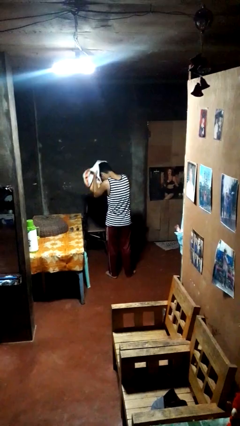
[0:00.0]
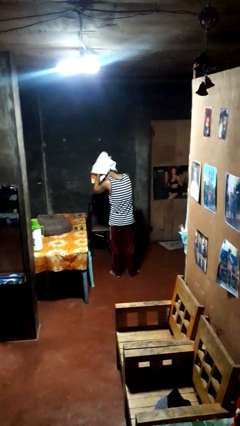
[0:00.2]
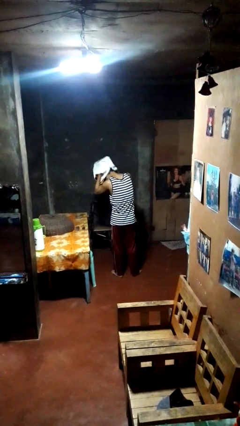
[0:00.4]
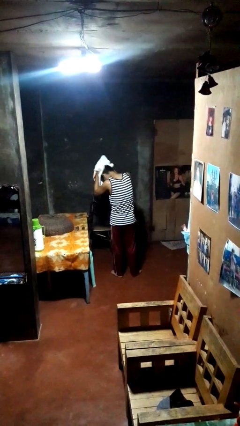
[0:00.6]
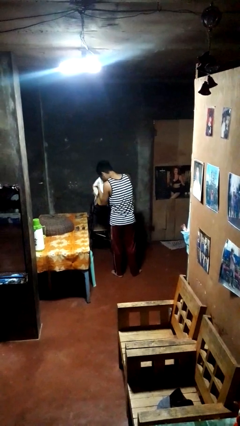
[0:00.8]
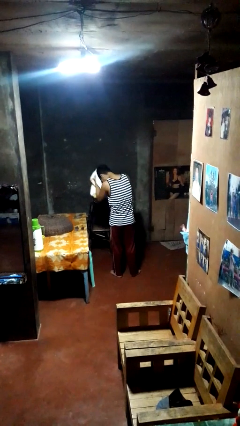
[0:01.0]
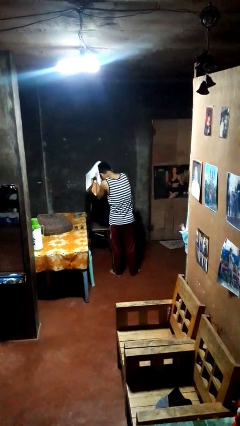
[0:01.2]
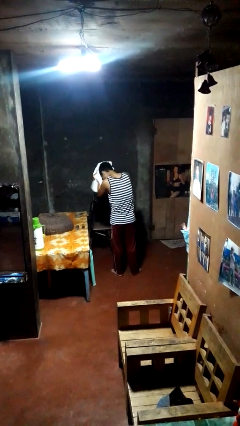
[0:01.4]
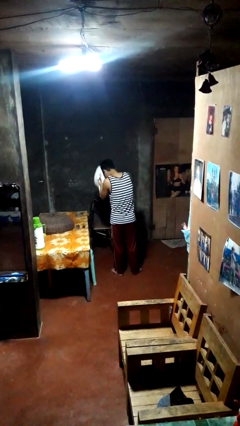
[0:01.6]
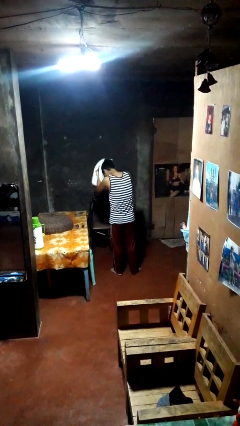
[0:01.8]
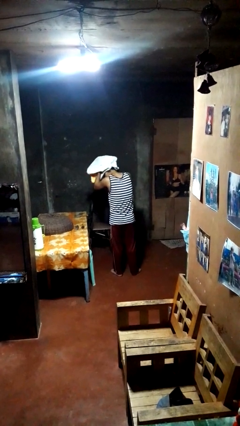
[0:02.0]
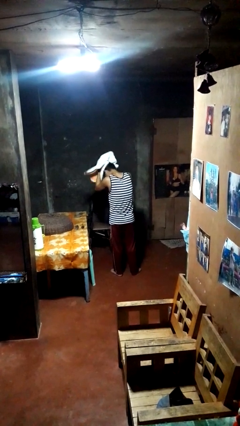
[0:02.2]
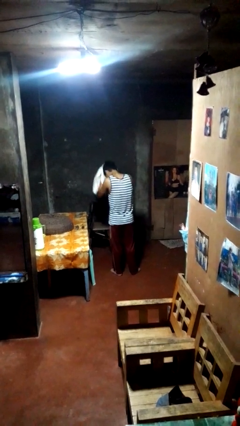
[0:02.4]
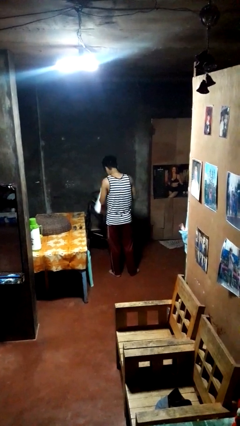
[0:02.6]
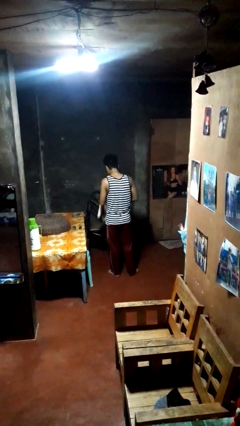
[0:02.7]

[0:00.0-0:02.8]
person dries hair with towel

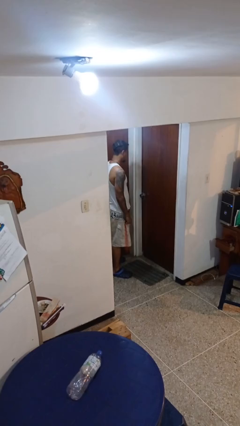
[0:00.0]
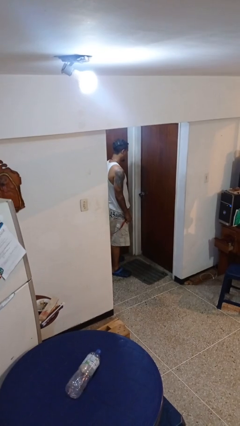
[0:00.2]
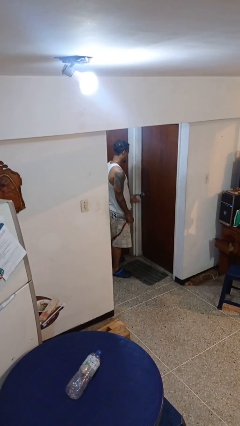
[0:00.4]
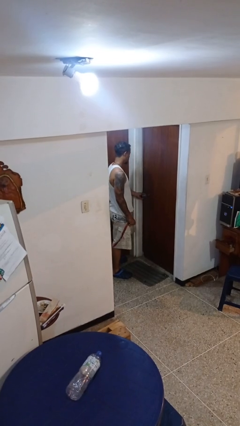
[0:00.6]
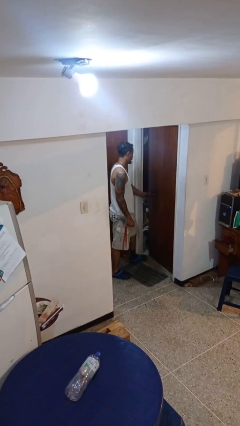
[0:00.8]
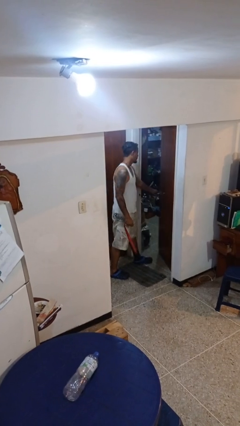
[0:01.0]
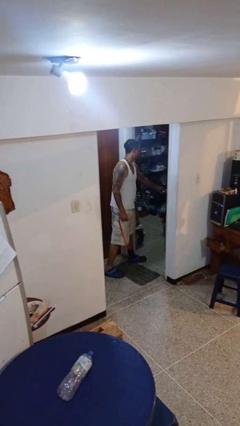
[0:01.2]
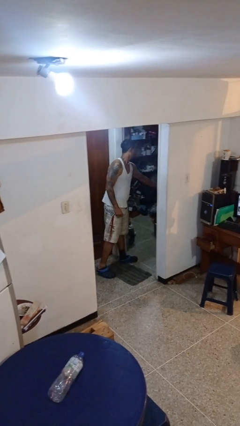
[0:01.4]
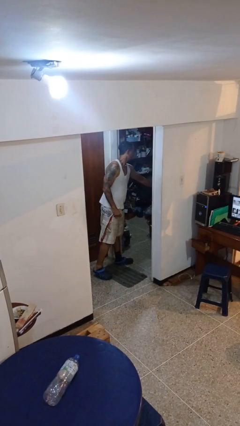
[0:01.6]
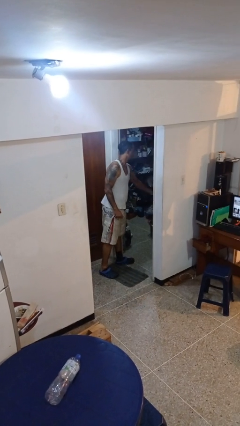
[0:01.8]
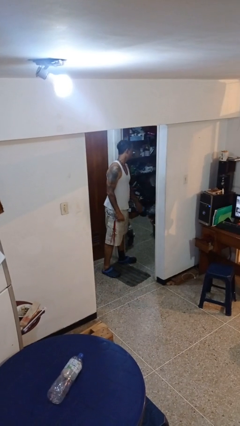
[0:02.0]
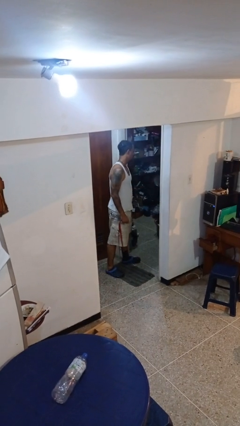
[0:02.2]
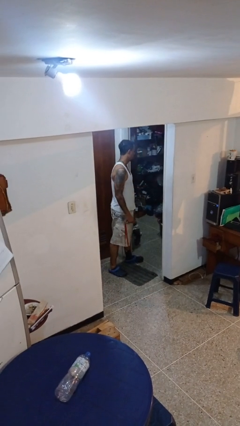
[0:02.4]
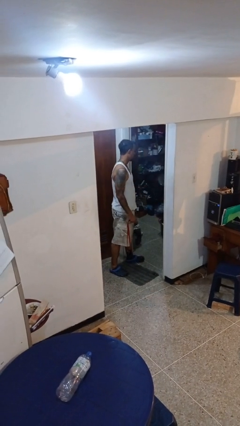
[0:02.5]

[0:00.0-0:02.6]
person opens facility door

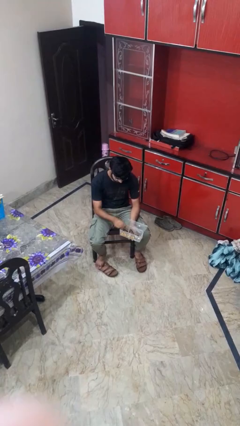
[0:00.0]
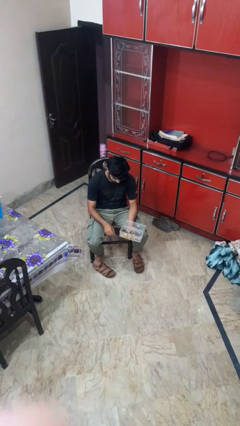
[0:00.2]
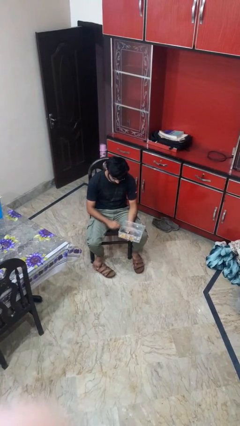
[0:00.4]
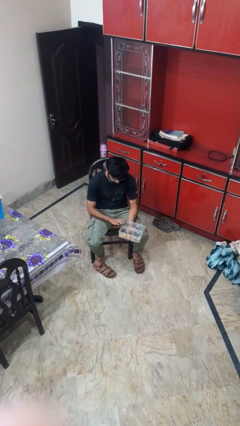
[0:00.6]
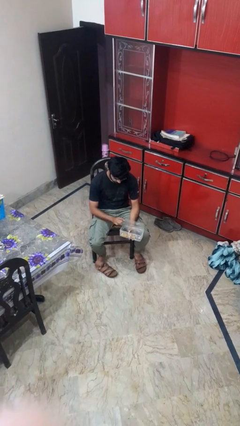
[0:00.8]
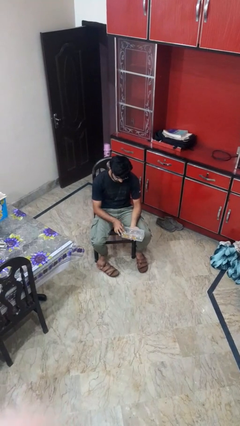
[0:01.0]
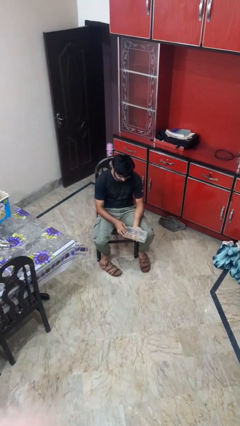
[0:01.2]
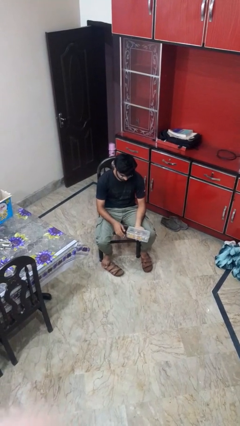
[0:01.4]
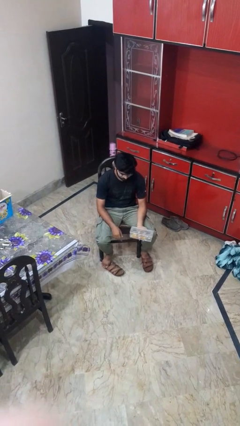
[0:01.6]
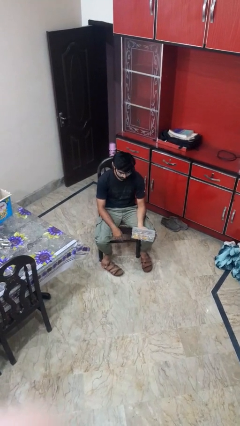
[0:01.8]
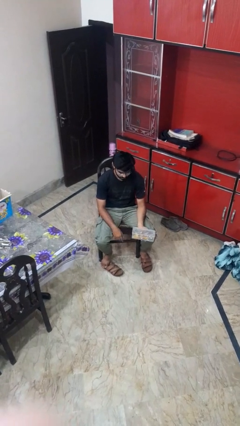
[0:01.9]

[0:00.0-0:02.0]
person closes jewelry box

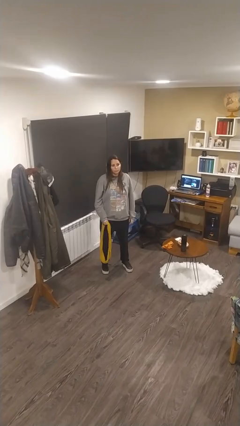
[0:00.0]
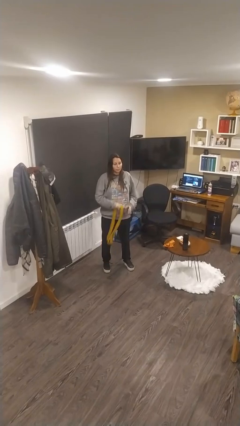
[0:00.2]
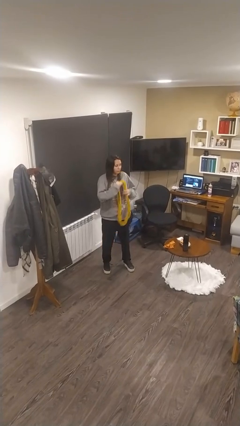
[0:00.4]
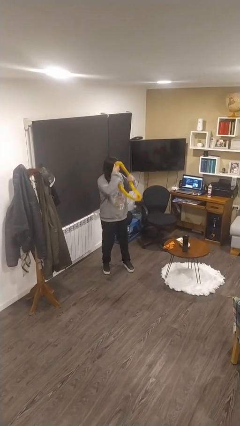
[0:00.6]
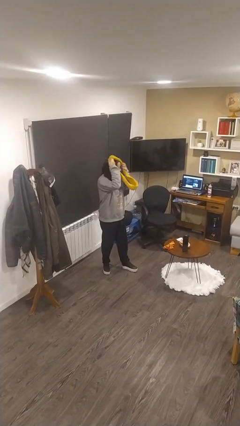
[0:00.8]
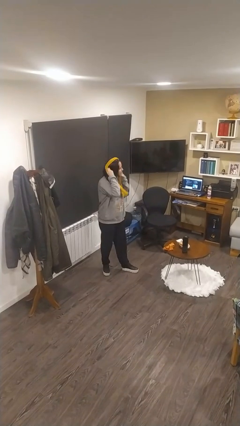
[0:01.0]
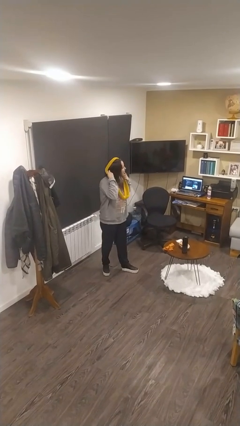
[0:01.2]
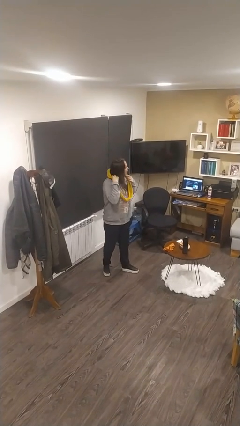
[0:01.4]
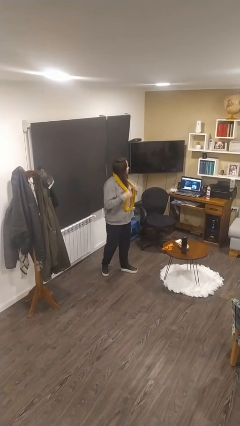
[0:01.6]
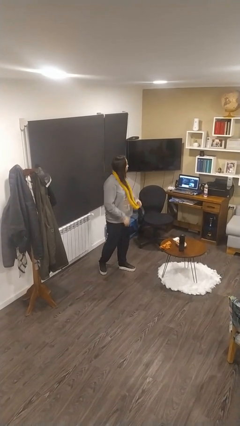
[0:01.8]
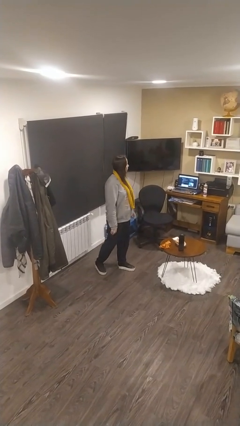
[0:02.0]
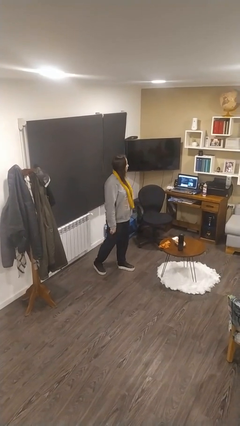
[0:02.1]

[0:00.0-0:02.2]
person puts on scarf

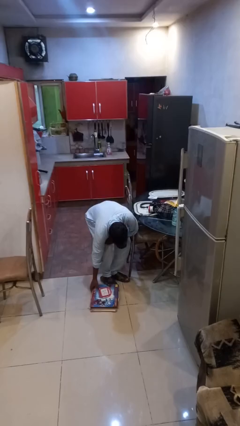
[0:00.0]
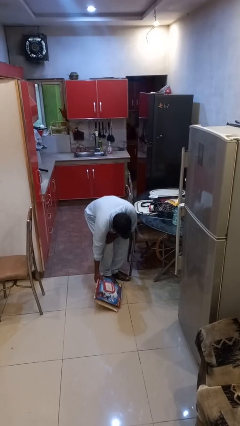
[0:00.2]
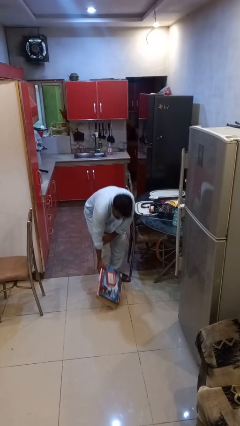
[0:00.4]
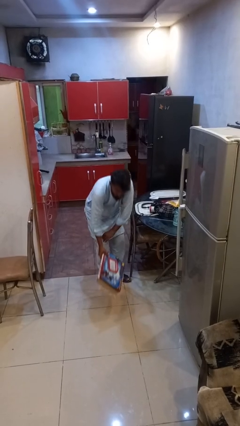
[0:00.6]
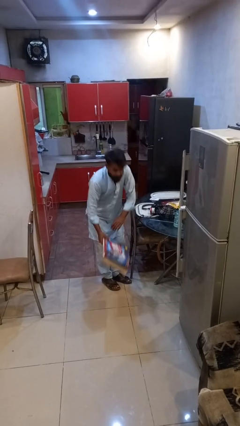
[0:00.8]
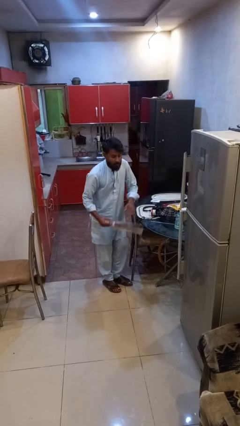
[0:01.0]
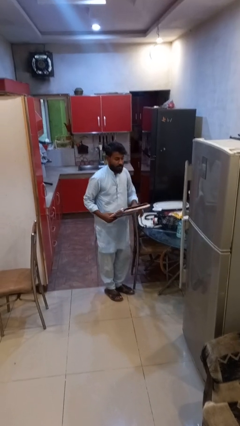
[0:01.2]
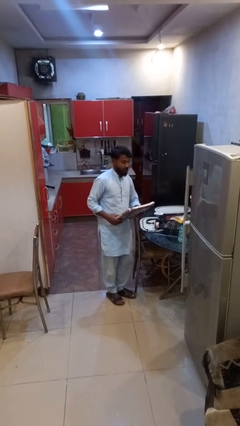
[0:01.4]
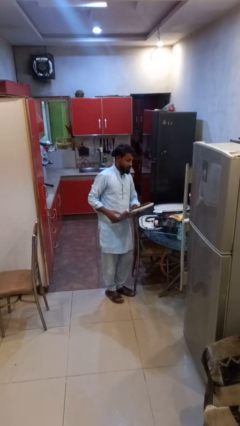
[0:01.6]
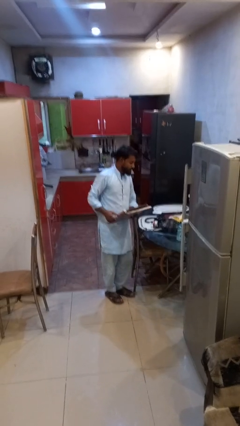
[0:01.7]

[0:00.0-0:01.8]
person picks up object from floor

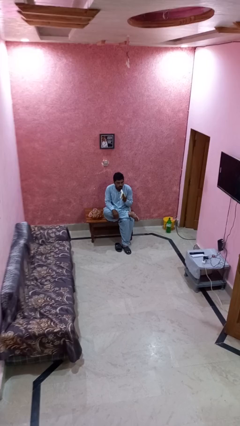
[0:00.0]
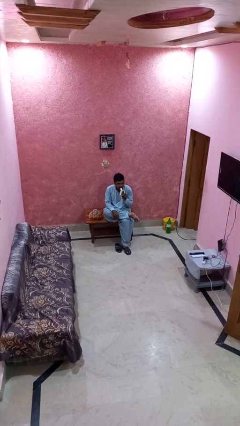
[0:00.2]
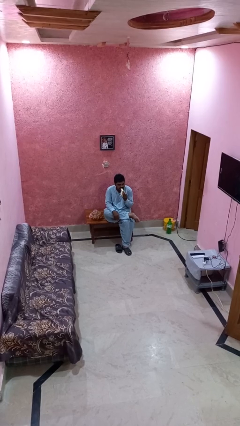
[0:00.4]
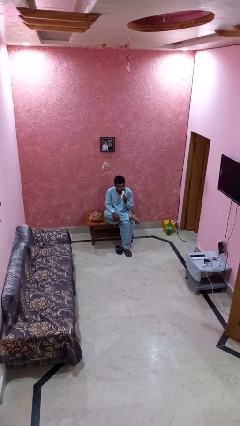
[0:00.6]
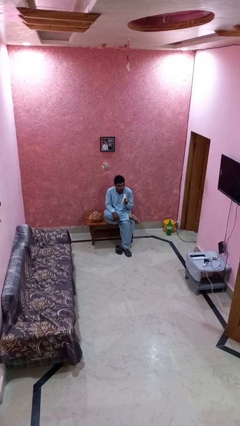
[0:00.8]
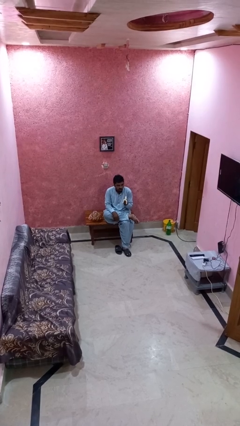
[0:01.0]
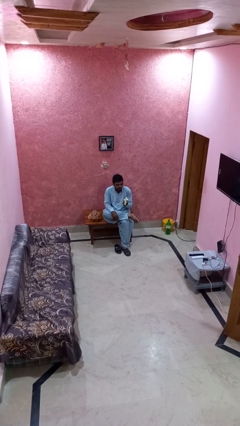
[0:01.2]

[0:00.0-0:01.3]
person eats banana

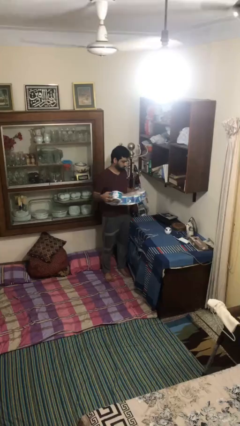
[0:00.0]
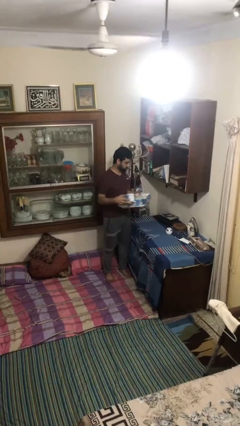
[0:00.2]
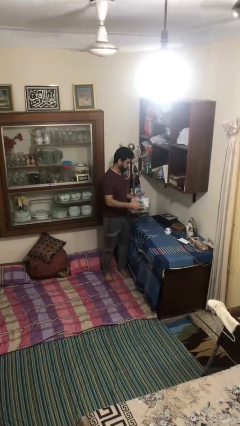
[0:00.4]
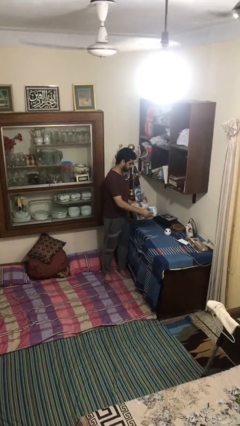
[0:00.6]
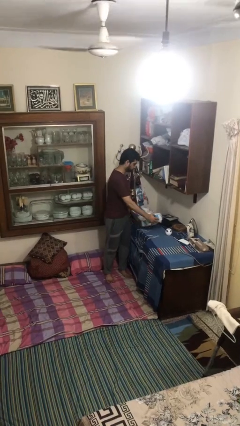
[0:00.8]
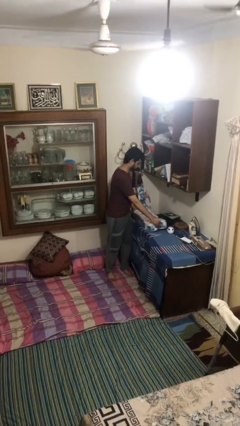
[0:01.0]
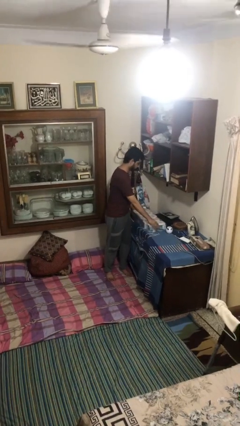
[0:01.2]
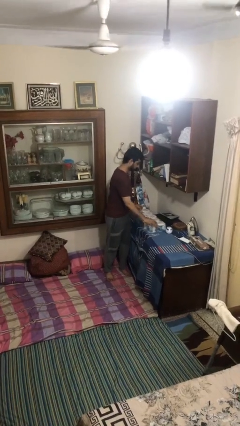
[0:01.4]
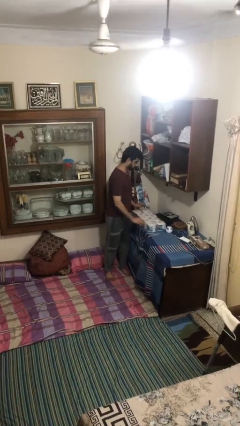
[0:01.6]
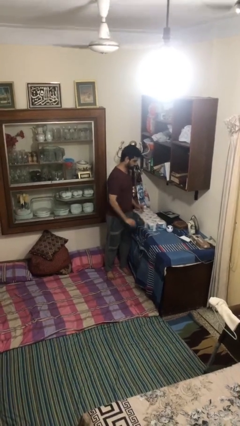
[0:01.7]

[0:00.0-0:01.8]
person puts down object on table

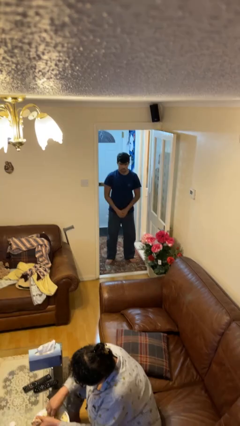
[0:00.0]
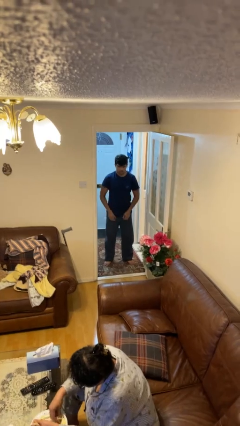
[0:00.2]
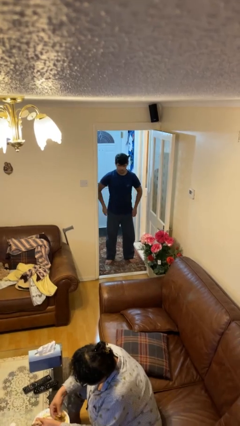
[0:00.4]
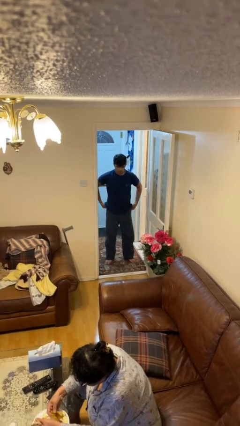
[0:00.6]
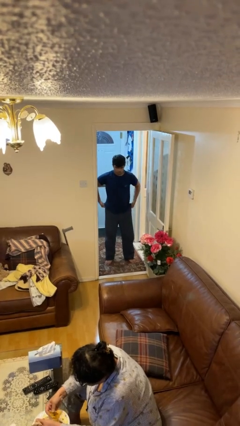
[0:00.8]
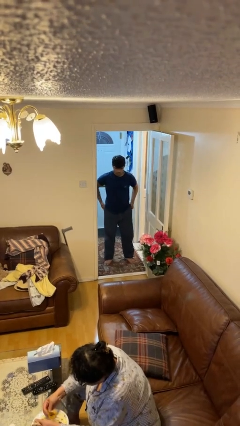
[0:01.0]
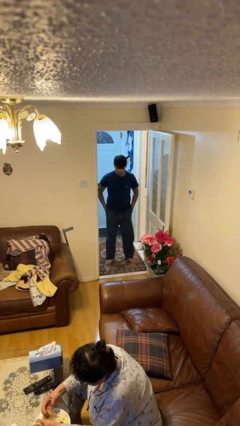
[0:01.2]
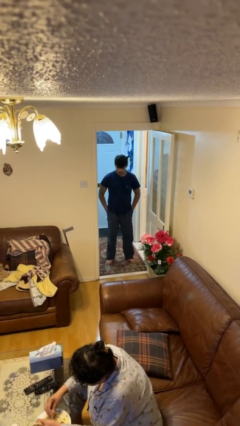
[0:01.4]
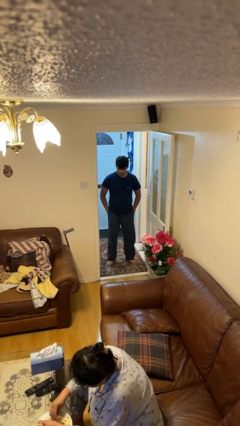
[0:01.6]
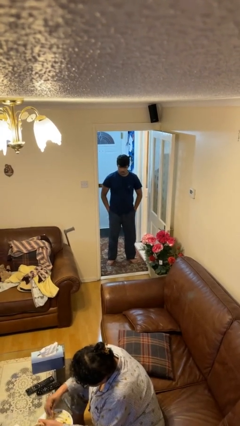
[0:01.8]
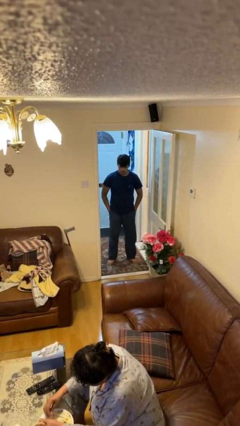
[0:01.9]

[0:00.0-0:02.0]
person puts hands in back pockets

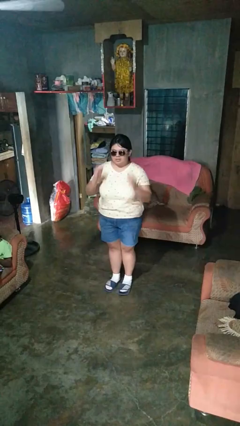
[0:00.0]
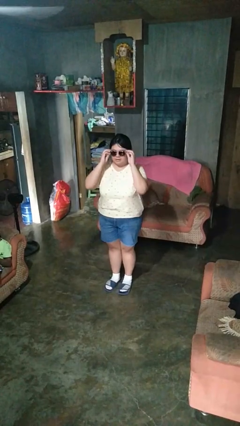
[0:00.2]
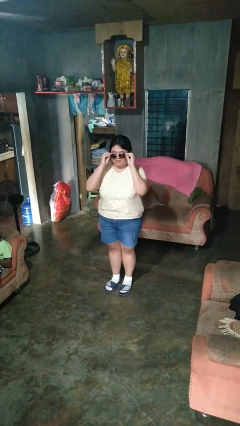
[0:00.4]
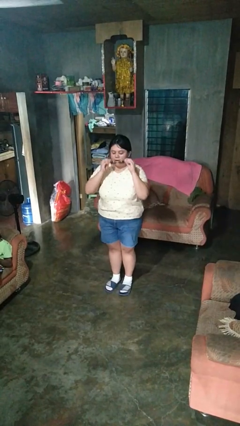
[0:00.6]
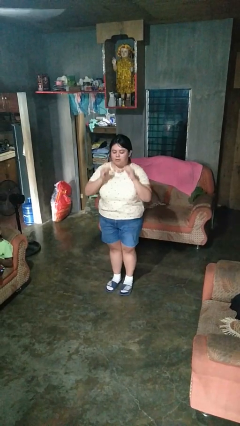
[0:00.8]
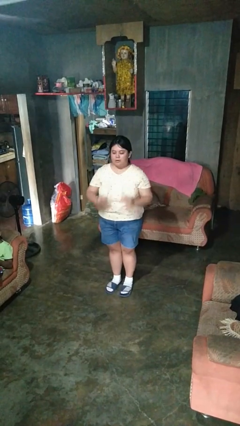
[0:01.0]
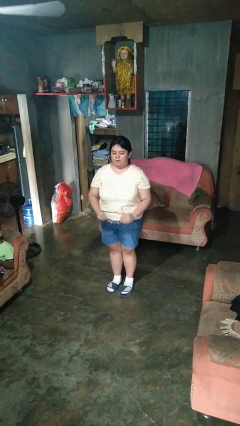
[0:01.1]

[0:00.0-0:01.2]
person takes off sunglasses
